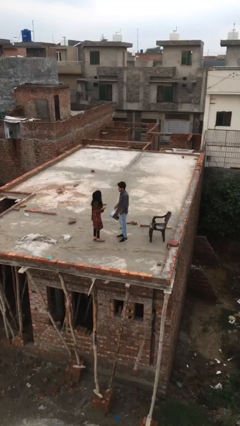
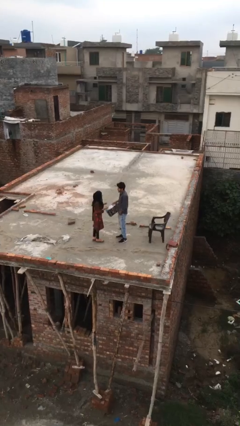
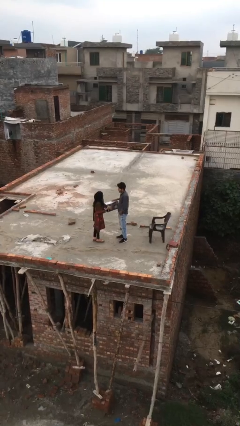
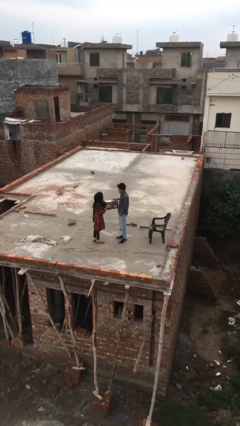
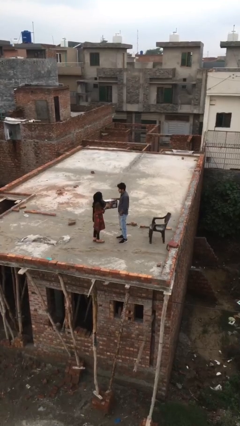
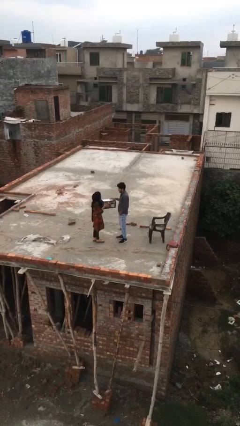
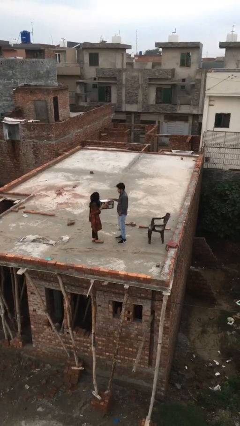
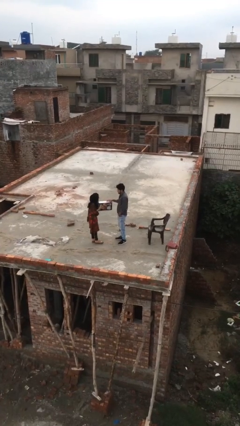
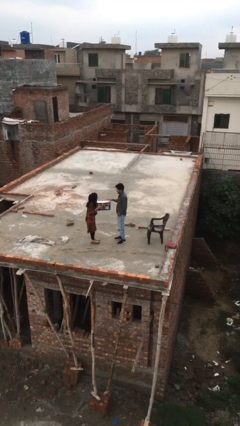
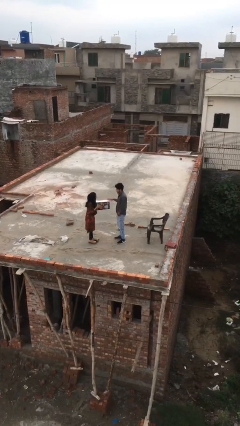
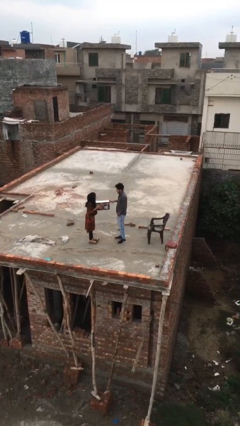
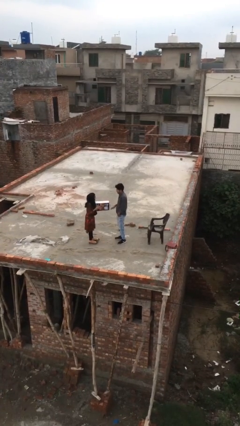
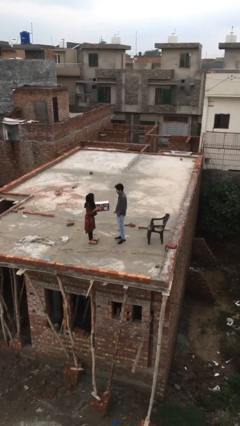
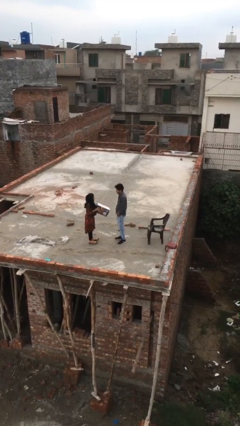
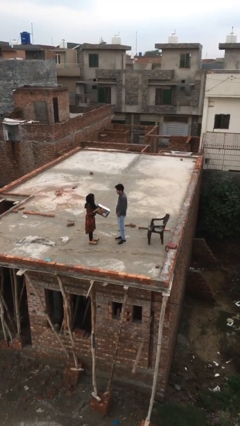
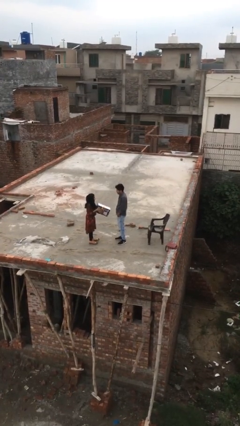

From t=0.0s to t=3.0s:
person transfers object to person

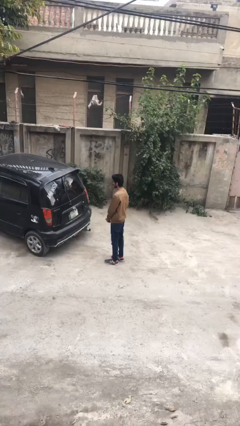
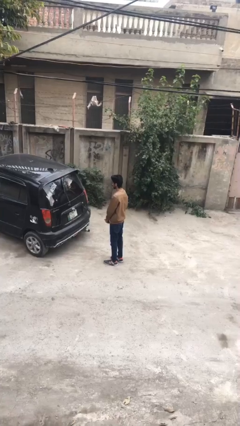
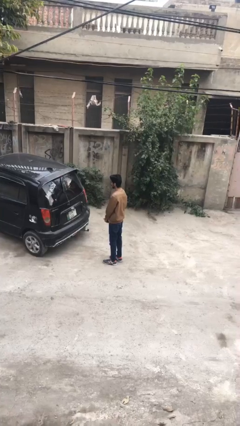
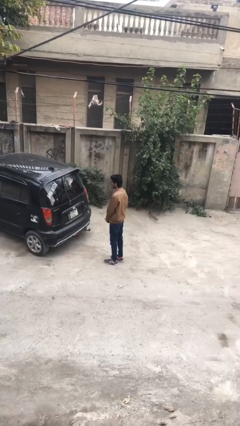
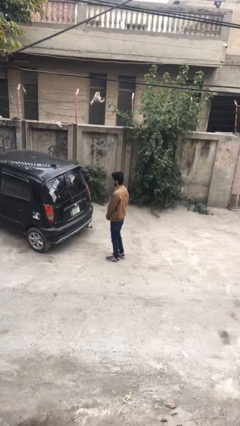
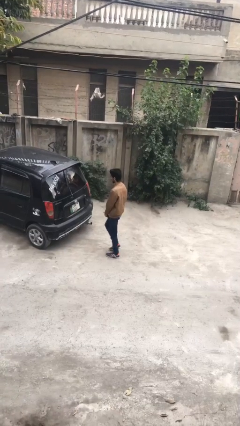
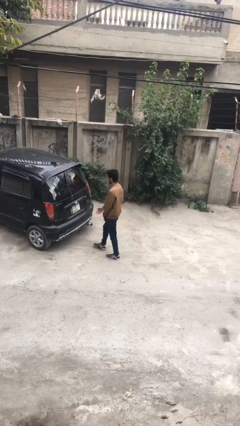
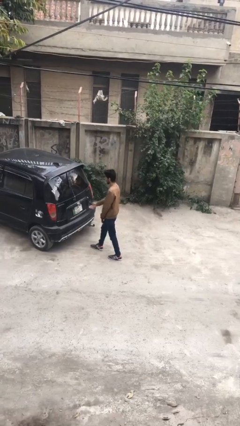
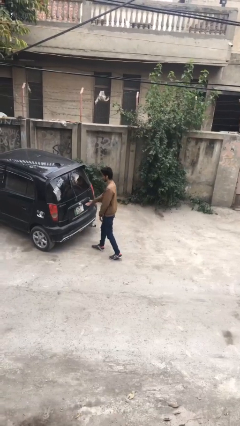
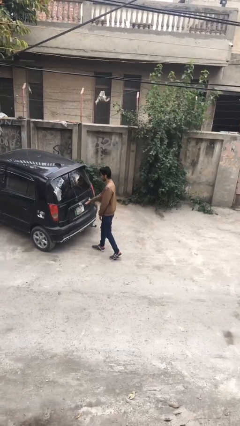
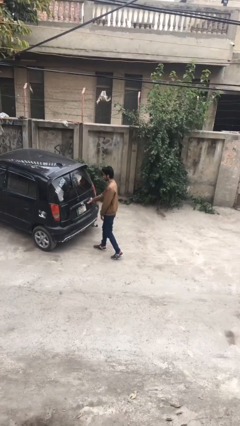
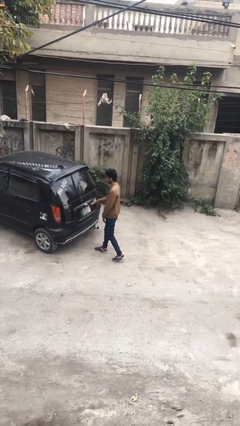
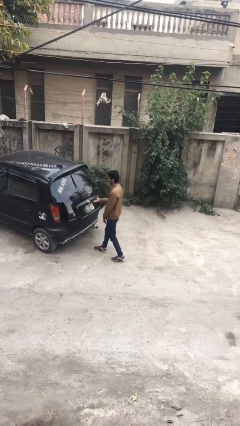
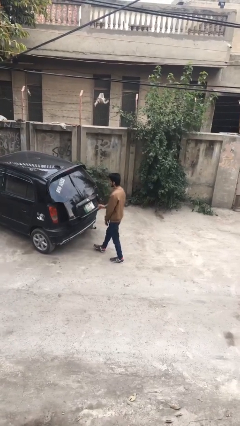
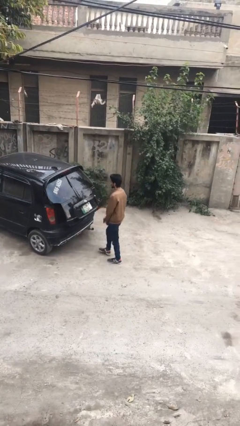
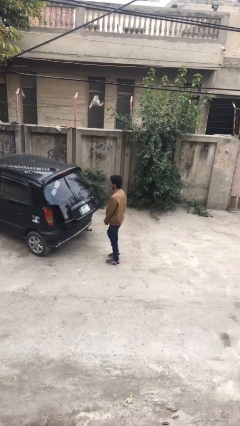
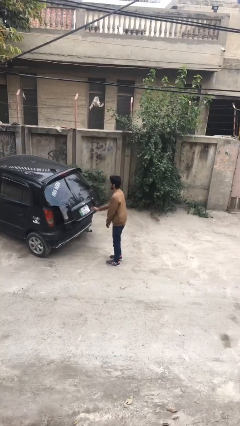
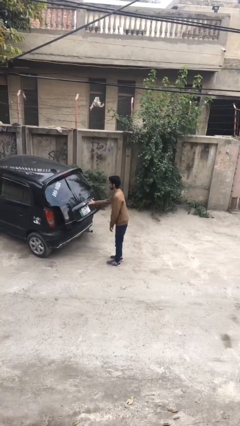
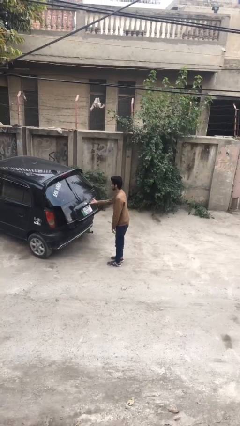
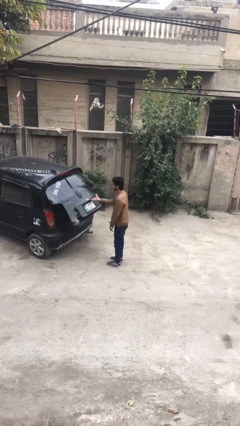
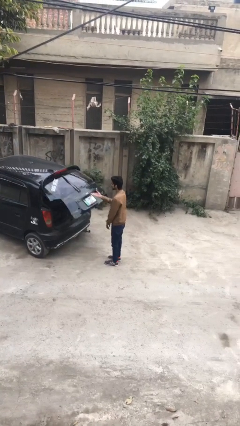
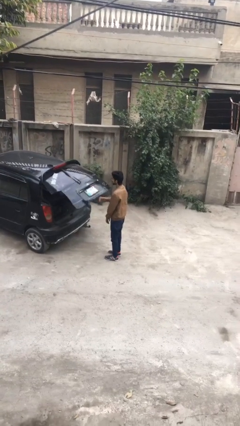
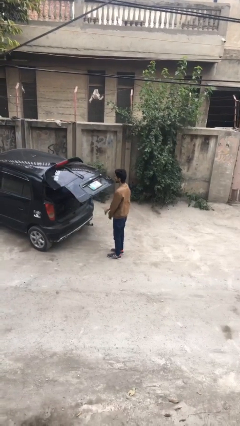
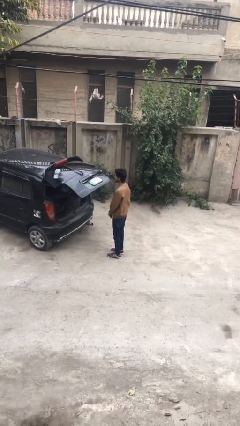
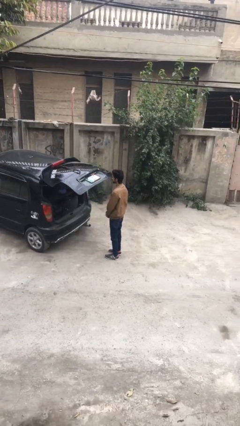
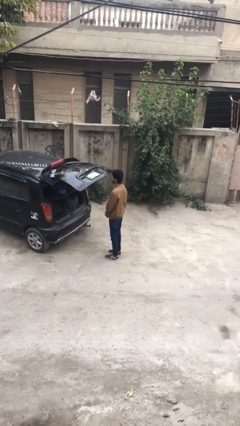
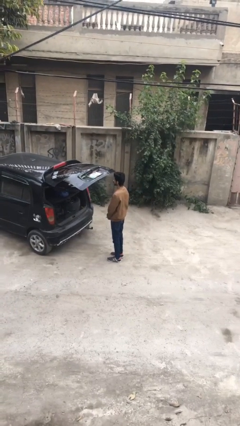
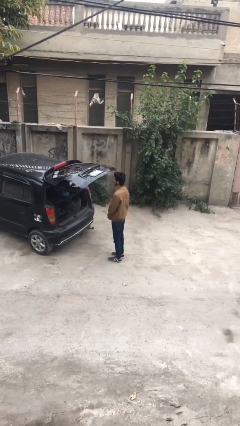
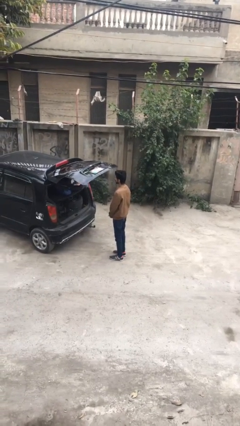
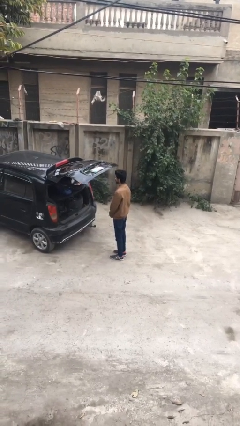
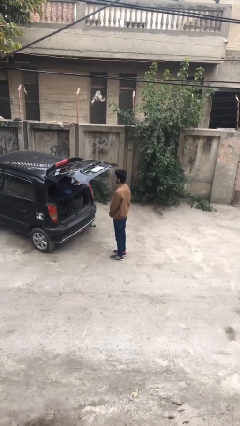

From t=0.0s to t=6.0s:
person opens car trunk

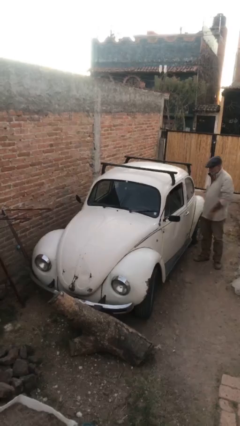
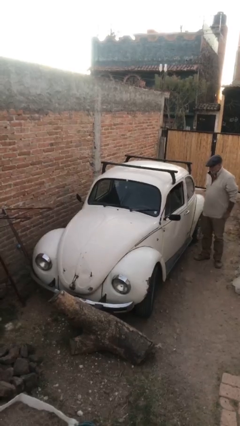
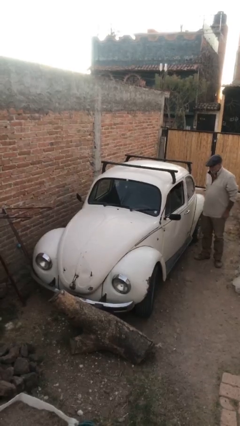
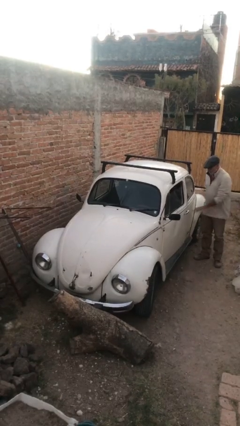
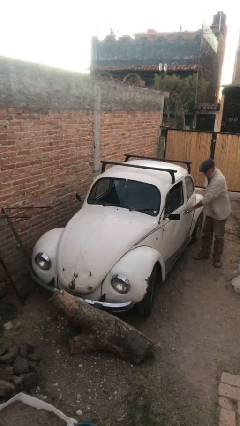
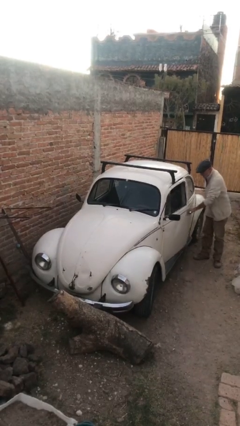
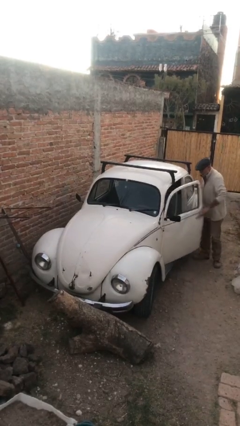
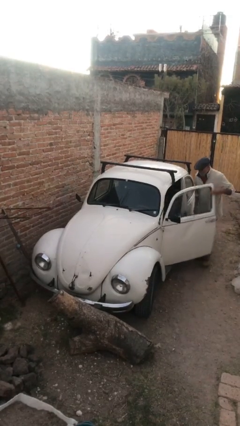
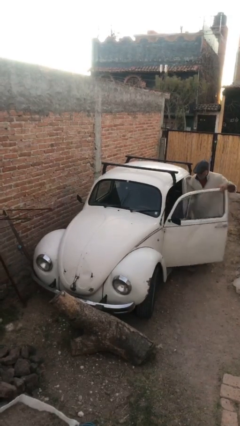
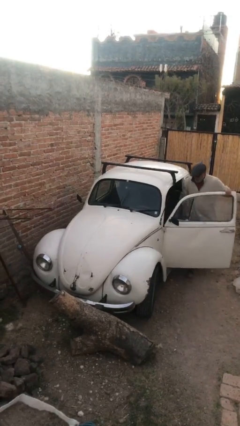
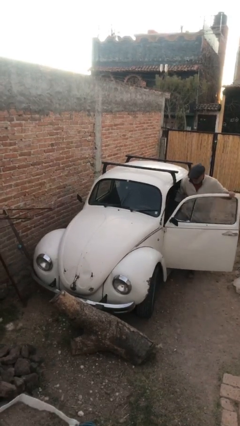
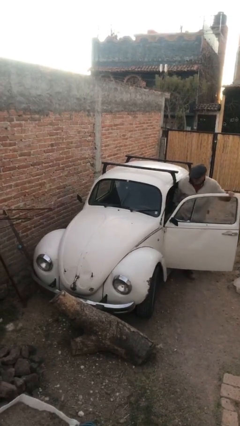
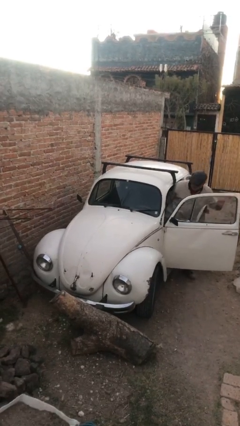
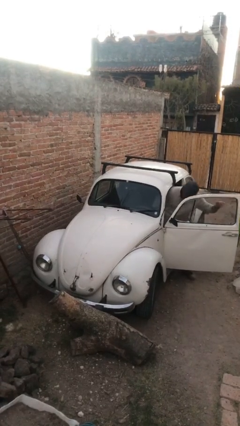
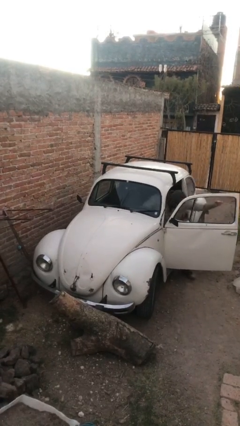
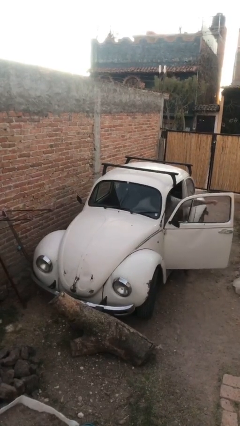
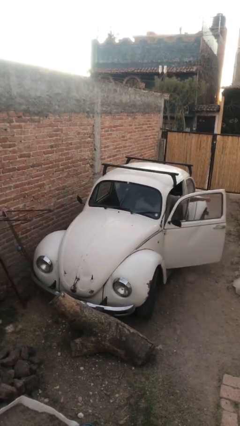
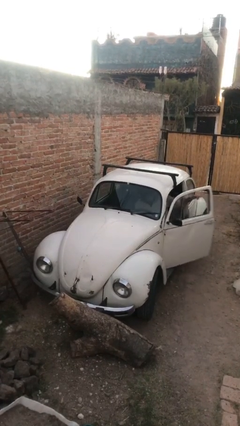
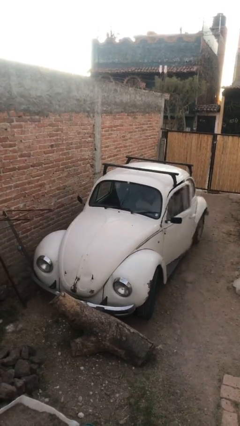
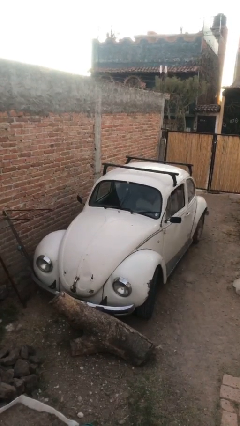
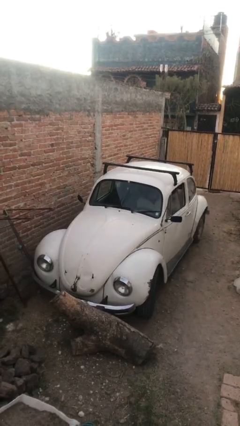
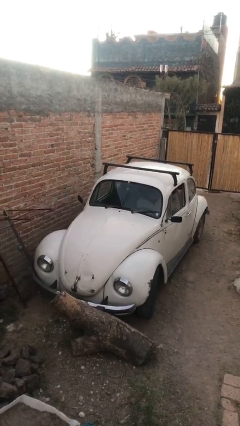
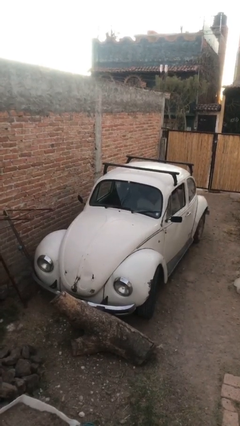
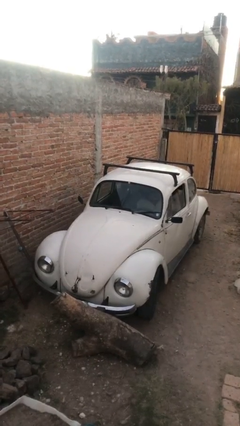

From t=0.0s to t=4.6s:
car picks up person

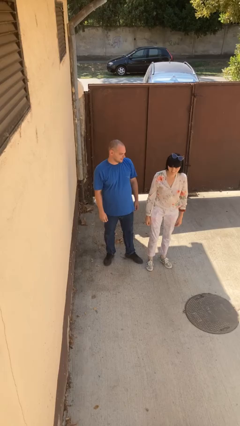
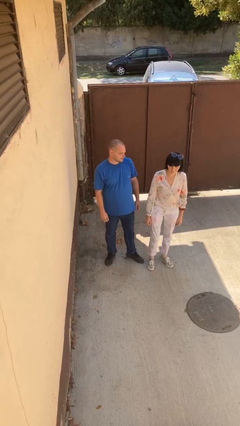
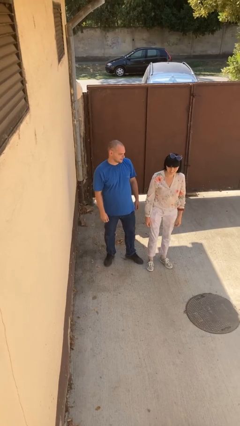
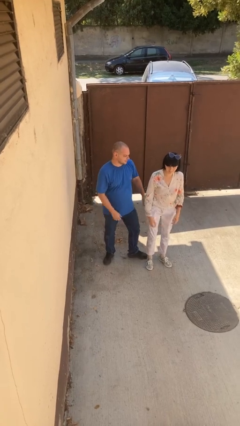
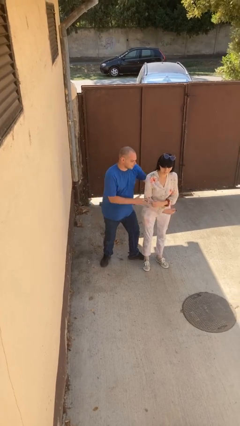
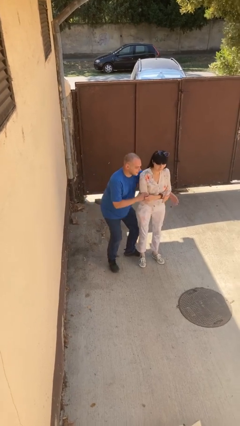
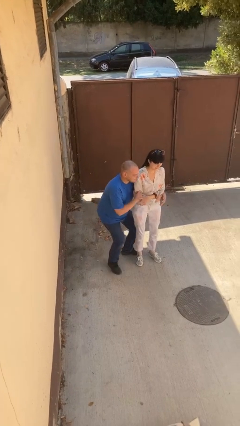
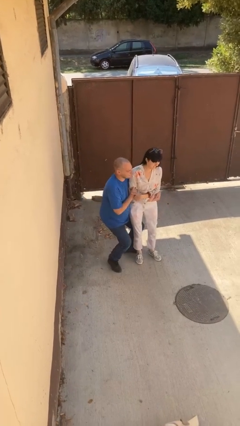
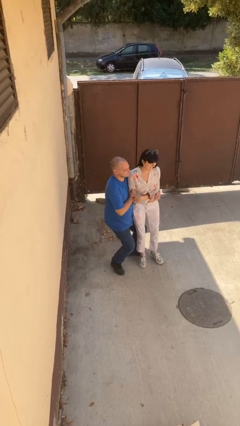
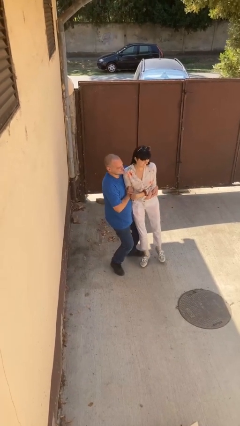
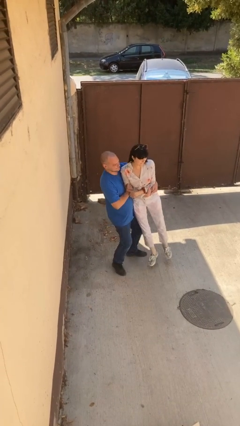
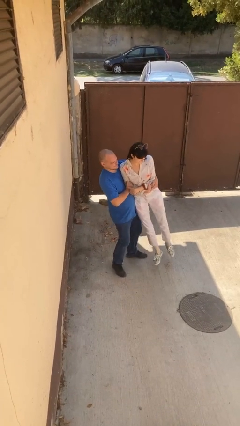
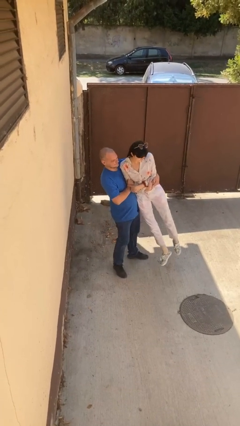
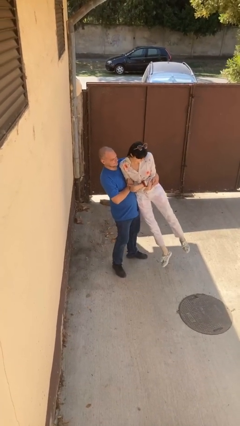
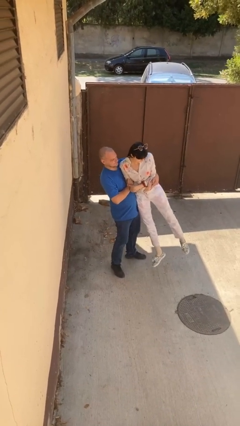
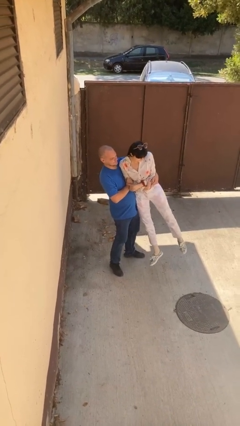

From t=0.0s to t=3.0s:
person picks up person

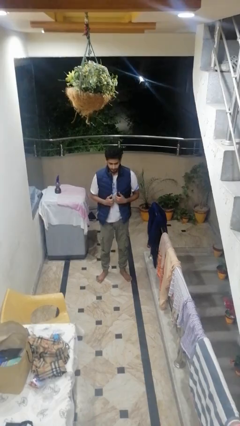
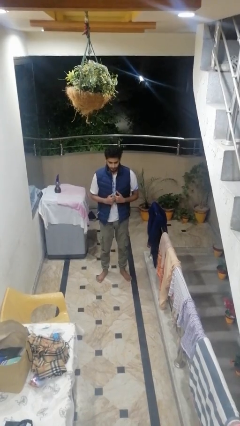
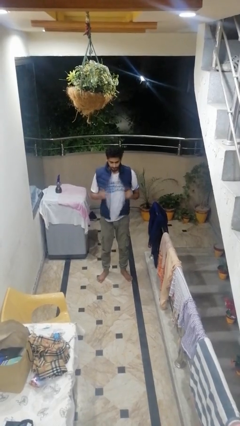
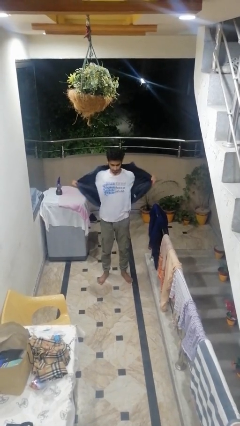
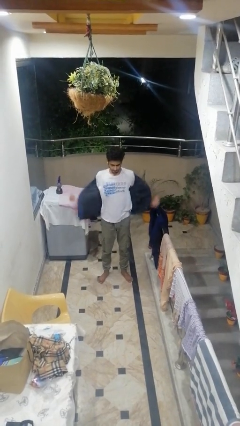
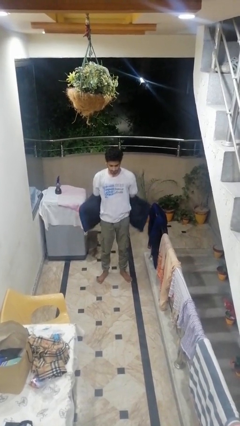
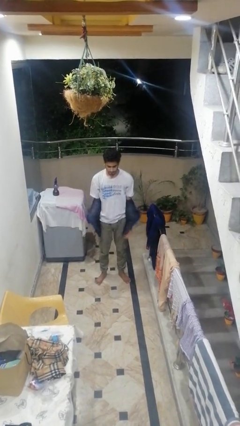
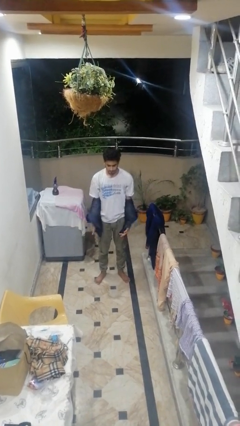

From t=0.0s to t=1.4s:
person takes off jacket
